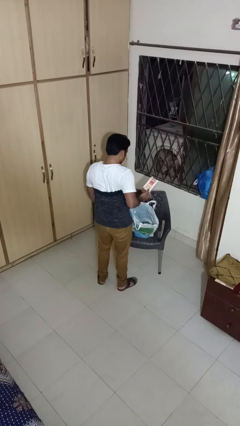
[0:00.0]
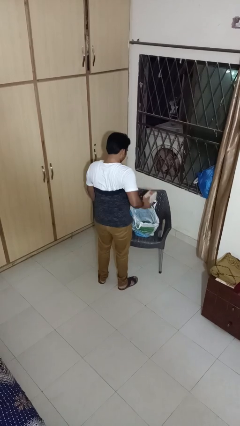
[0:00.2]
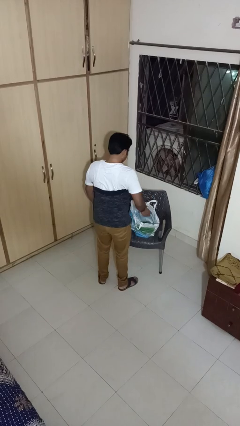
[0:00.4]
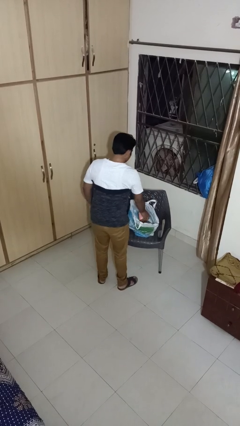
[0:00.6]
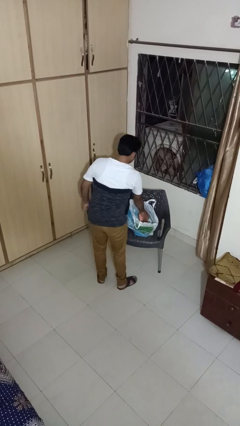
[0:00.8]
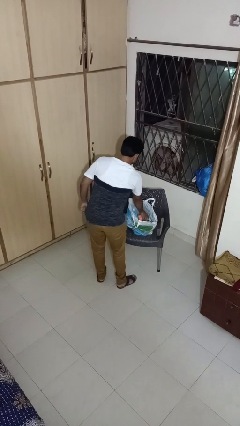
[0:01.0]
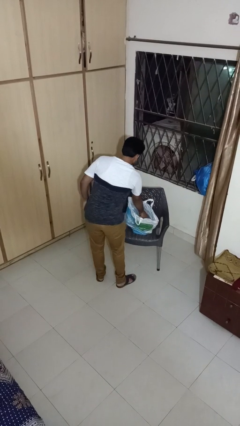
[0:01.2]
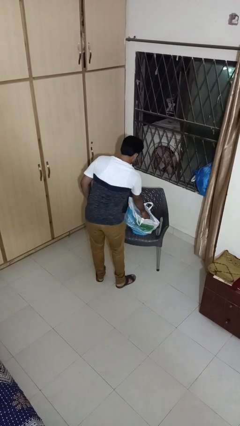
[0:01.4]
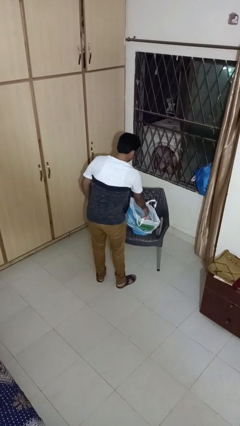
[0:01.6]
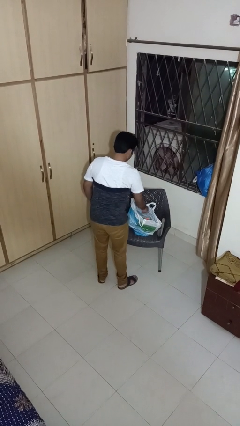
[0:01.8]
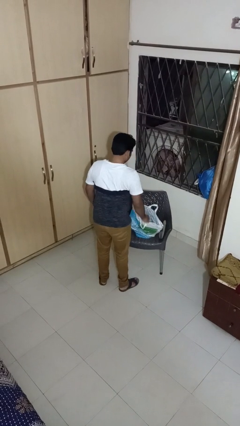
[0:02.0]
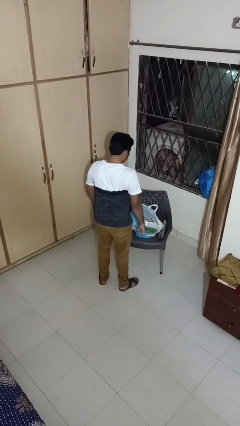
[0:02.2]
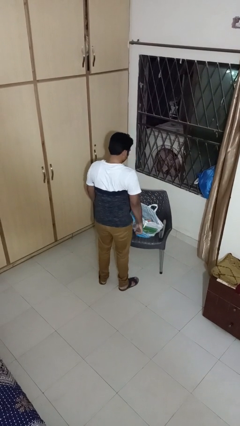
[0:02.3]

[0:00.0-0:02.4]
person puts object into bag

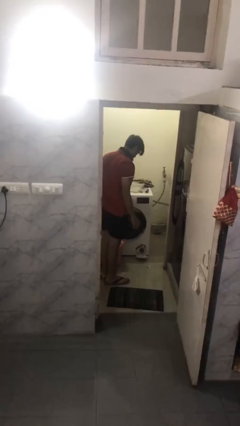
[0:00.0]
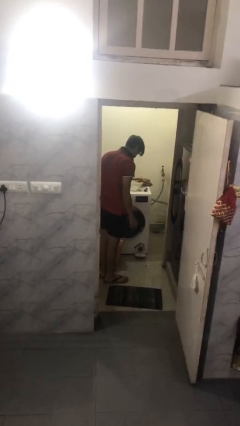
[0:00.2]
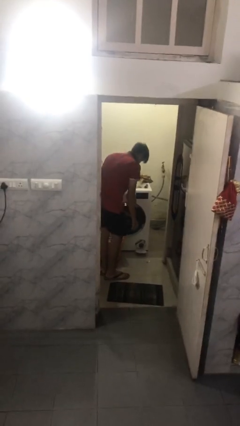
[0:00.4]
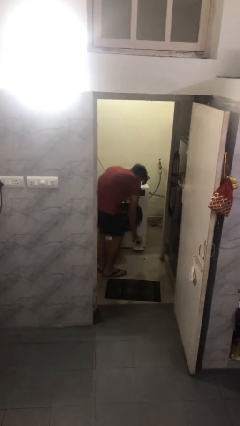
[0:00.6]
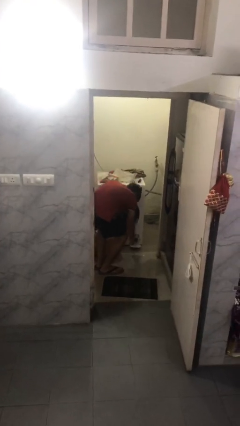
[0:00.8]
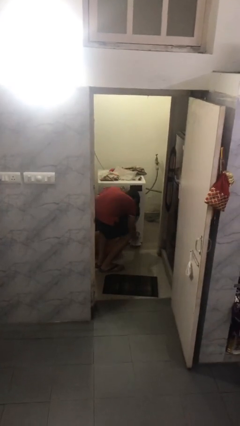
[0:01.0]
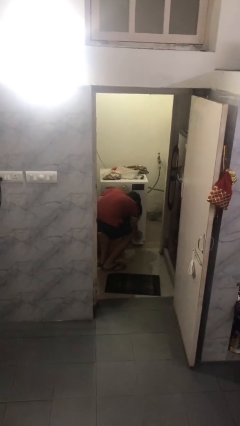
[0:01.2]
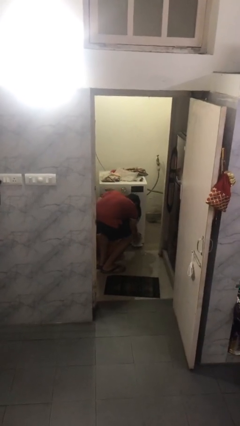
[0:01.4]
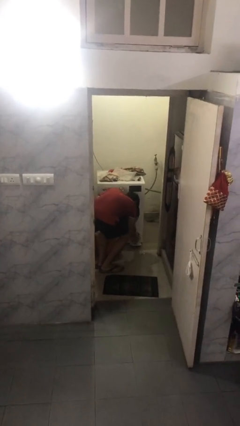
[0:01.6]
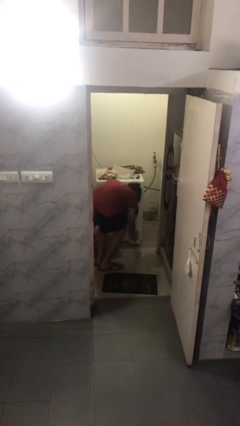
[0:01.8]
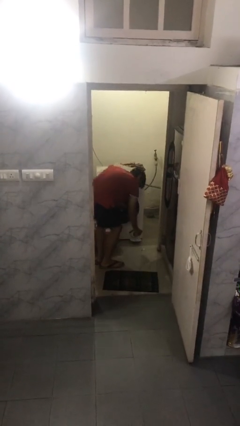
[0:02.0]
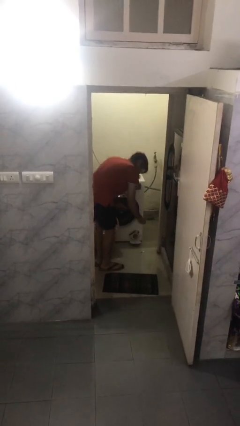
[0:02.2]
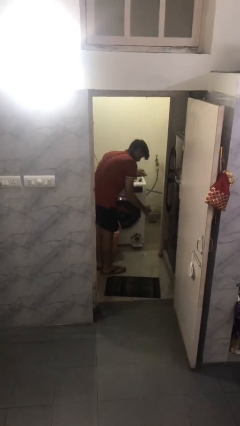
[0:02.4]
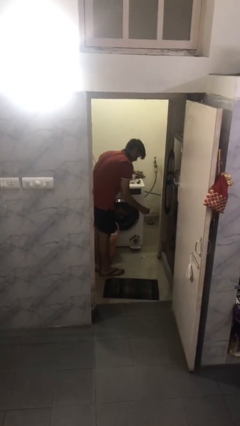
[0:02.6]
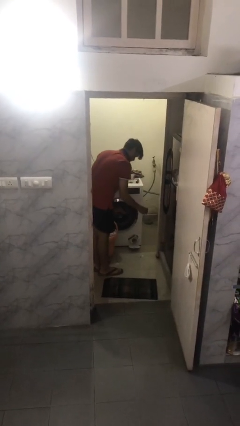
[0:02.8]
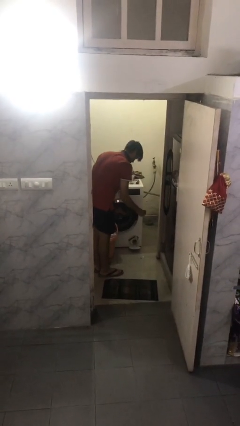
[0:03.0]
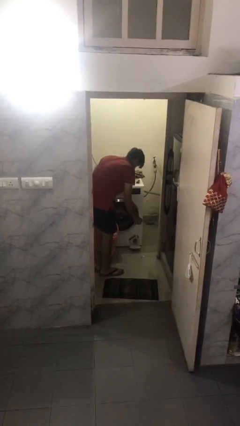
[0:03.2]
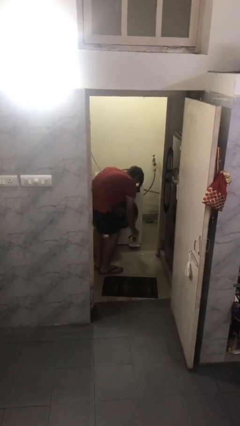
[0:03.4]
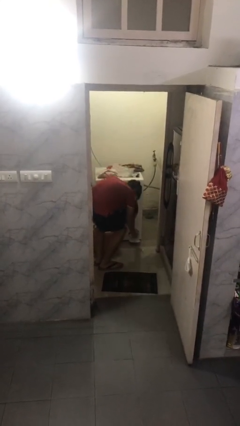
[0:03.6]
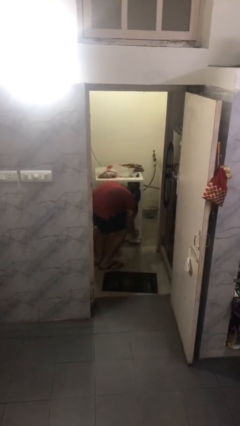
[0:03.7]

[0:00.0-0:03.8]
person cleans dryer lint trap

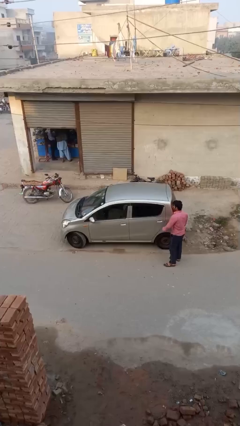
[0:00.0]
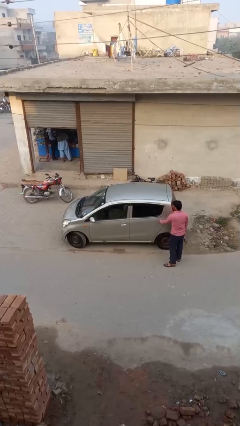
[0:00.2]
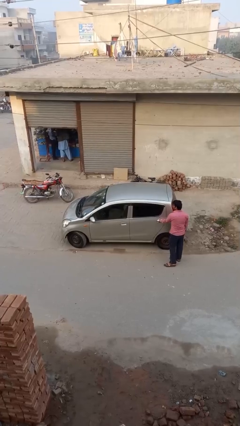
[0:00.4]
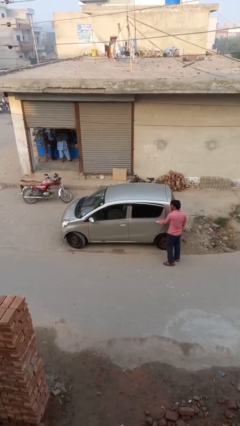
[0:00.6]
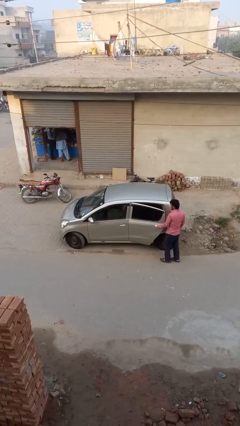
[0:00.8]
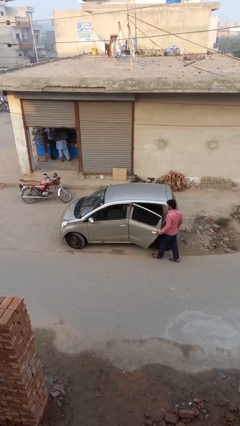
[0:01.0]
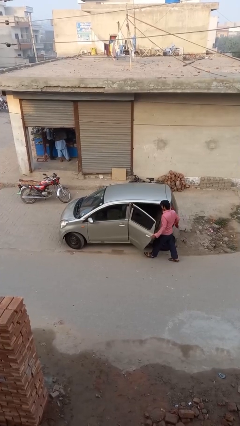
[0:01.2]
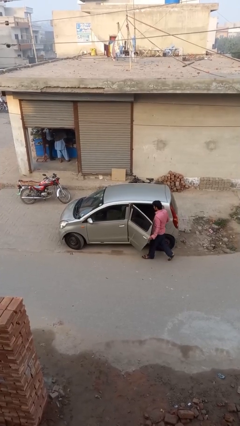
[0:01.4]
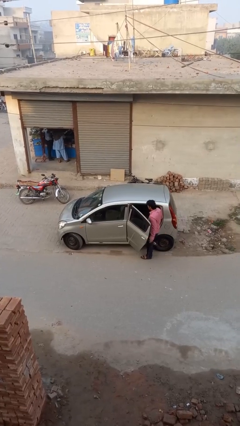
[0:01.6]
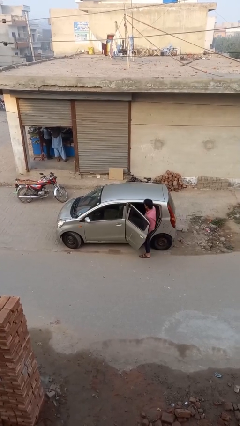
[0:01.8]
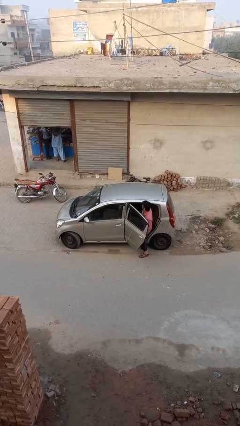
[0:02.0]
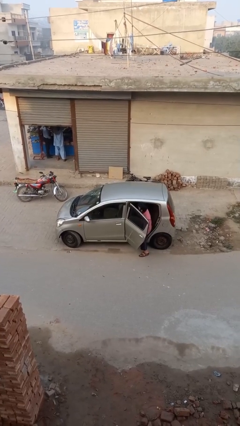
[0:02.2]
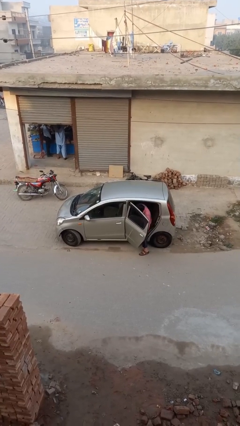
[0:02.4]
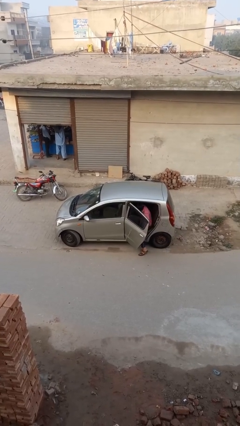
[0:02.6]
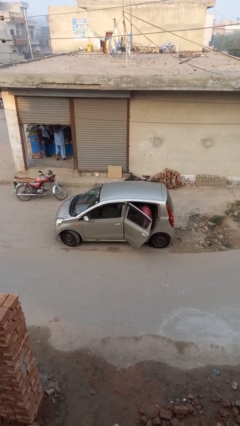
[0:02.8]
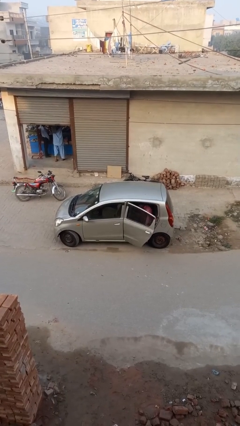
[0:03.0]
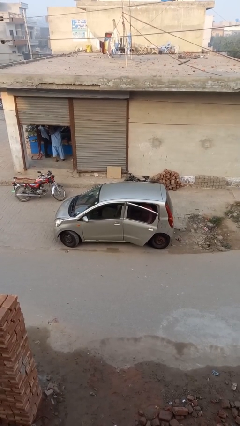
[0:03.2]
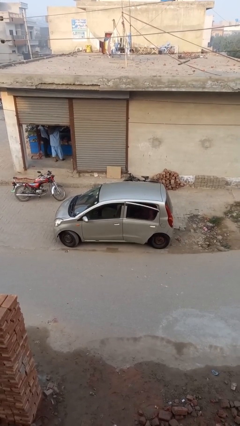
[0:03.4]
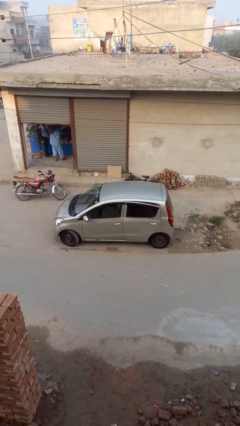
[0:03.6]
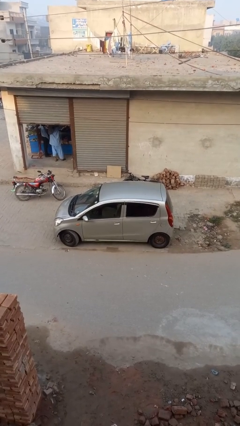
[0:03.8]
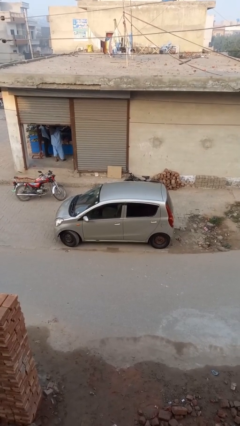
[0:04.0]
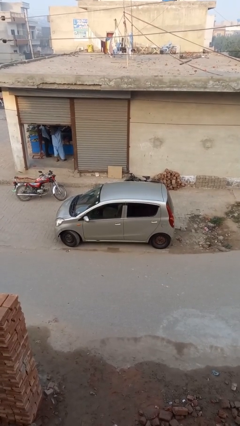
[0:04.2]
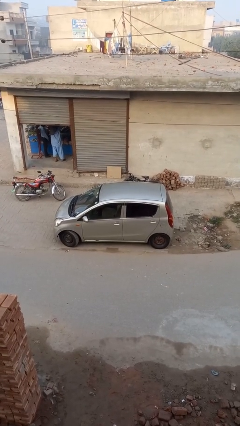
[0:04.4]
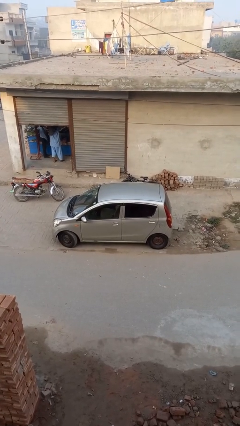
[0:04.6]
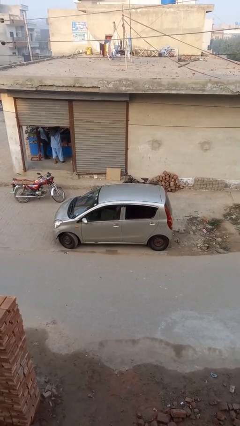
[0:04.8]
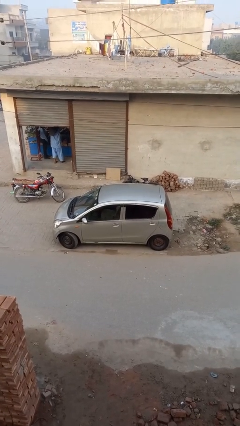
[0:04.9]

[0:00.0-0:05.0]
car picks up person

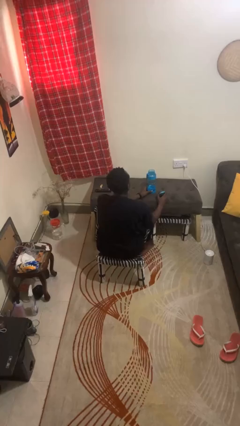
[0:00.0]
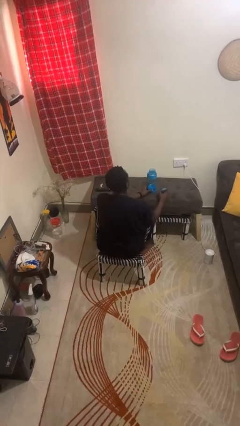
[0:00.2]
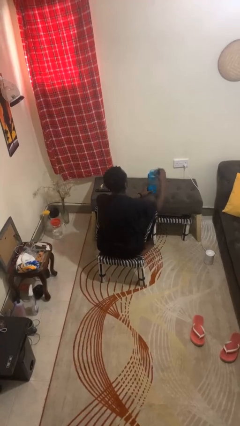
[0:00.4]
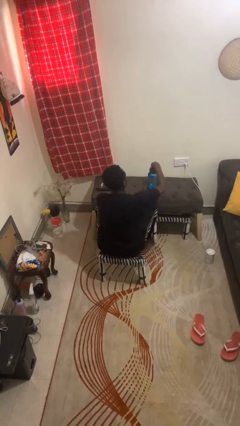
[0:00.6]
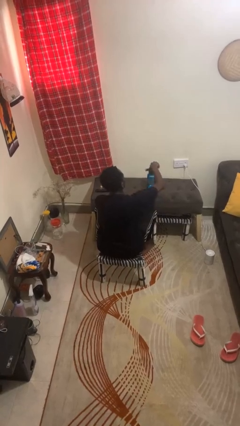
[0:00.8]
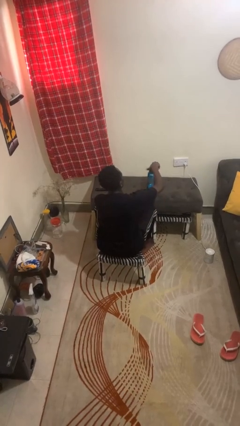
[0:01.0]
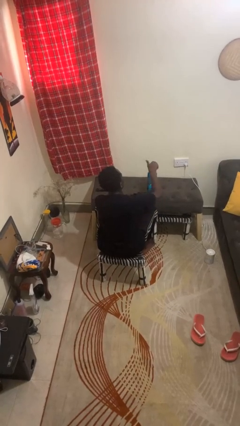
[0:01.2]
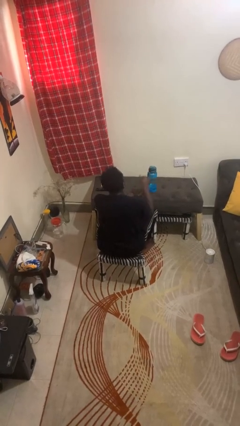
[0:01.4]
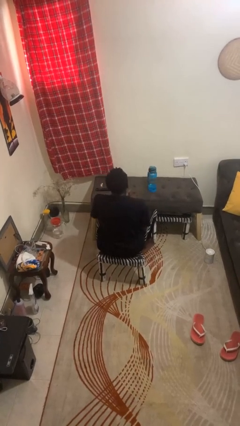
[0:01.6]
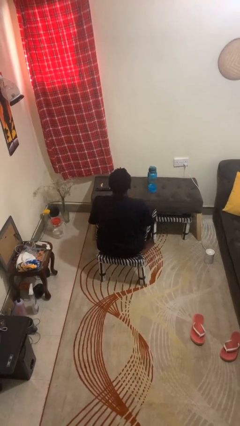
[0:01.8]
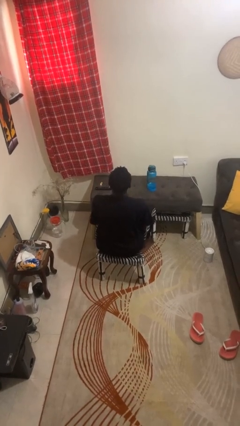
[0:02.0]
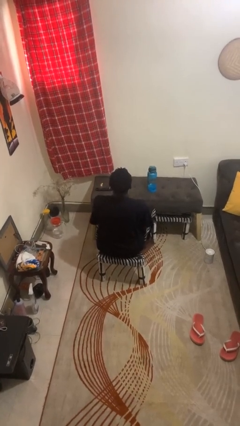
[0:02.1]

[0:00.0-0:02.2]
person closes jar

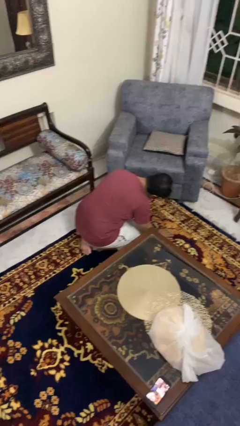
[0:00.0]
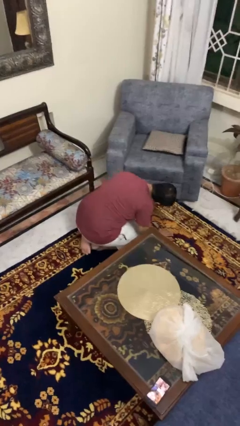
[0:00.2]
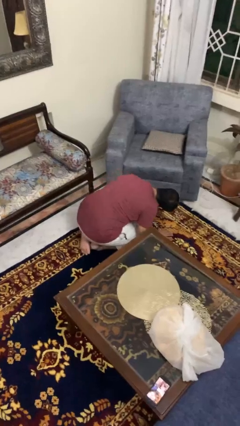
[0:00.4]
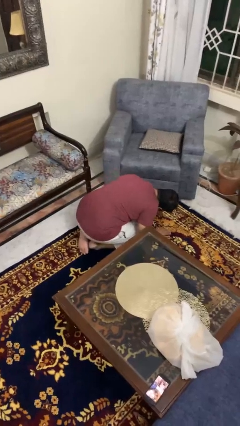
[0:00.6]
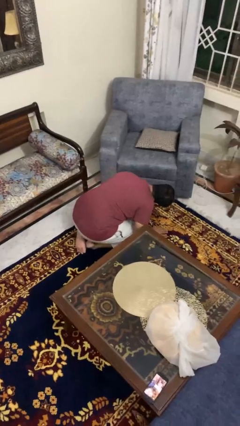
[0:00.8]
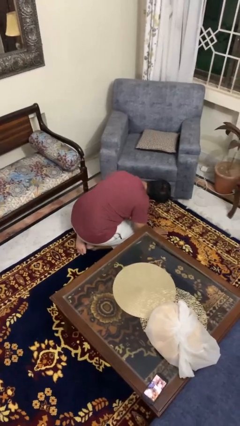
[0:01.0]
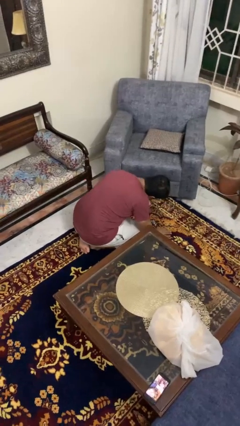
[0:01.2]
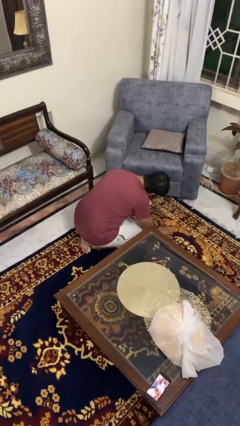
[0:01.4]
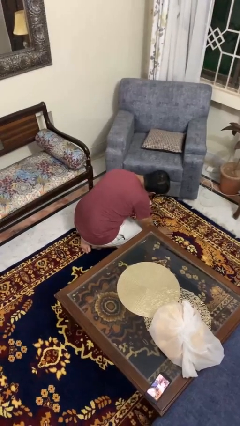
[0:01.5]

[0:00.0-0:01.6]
person searches under couch

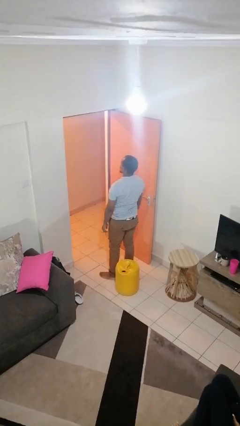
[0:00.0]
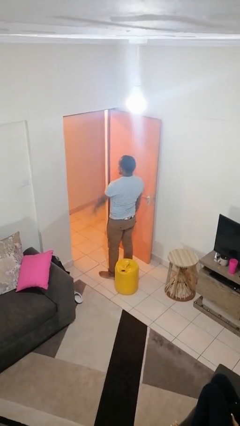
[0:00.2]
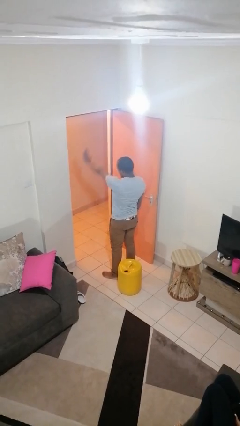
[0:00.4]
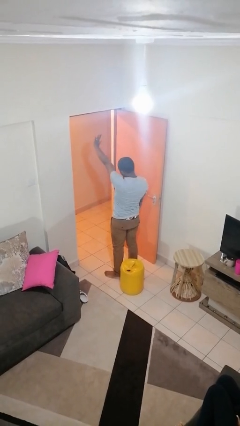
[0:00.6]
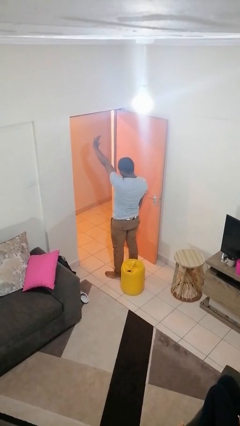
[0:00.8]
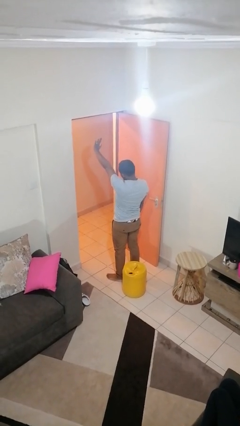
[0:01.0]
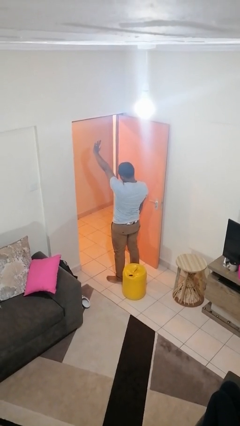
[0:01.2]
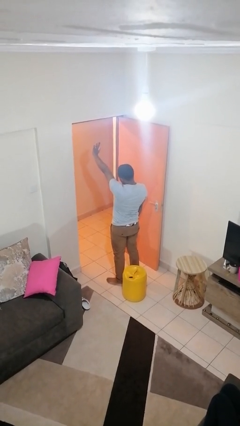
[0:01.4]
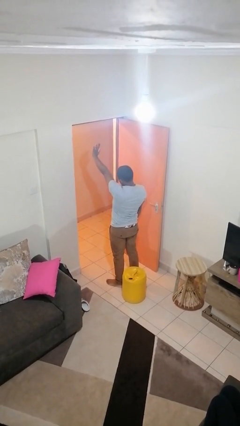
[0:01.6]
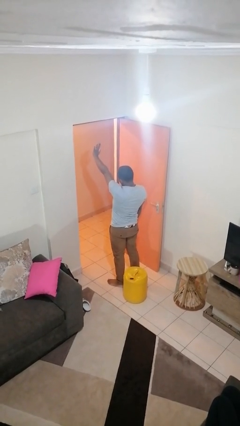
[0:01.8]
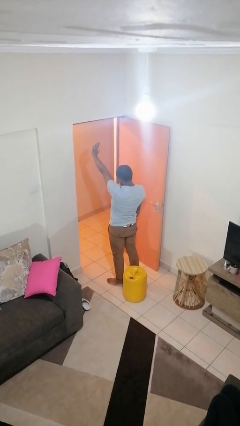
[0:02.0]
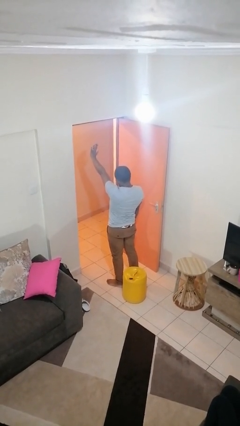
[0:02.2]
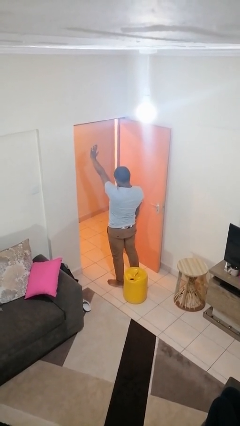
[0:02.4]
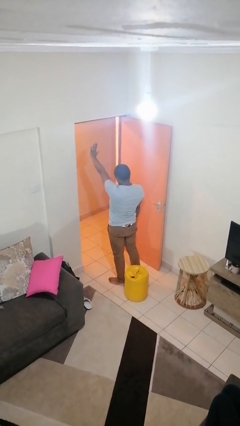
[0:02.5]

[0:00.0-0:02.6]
person gestures stop
